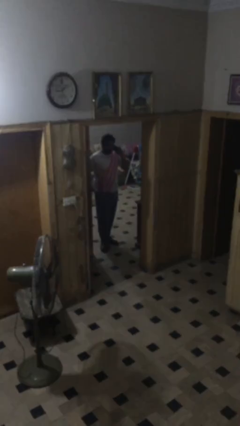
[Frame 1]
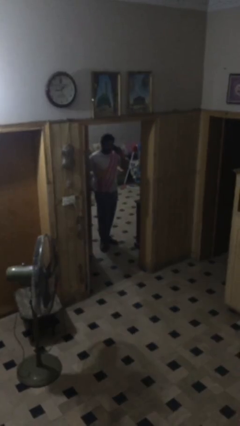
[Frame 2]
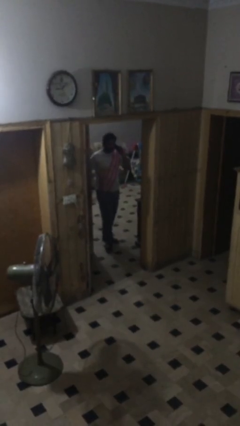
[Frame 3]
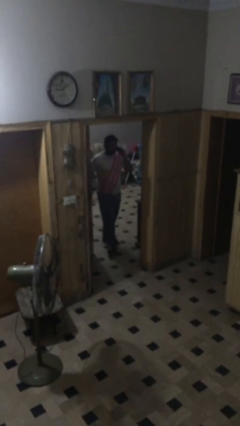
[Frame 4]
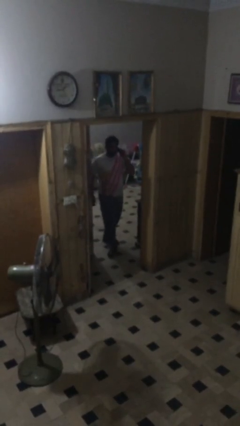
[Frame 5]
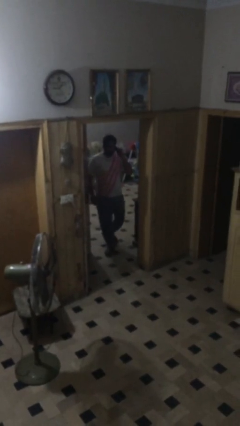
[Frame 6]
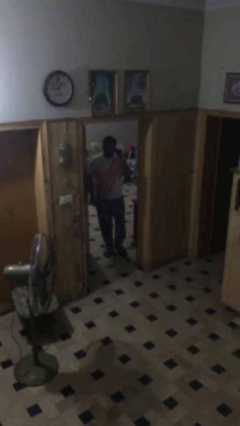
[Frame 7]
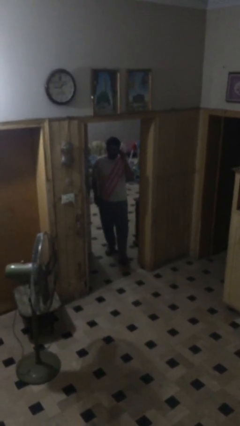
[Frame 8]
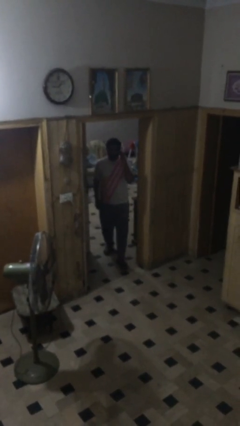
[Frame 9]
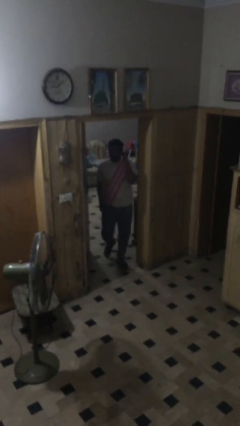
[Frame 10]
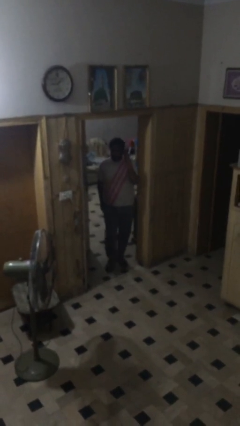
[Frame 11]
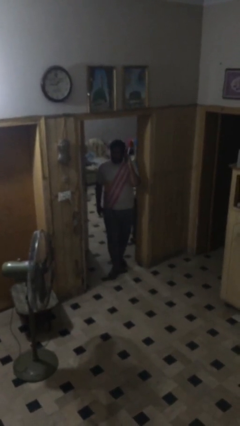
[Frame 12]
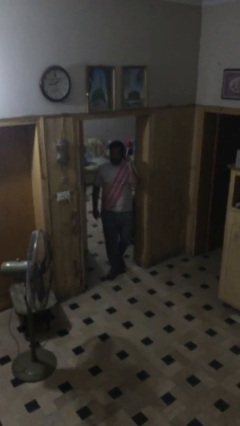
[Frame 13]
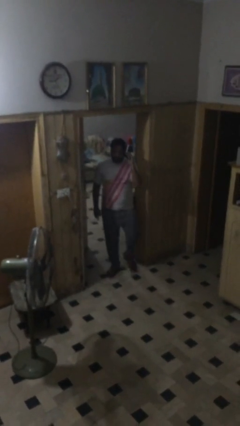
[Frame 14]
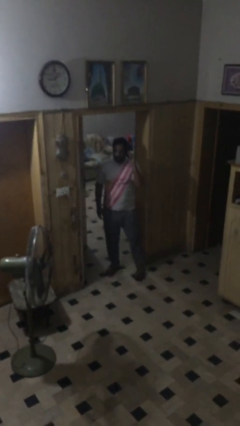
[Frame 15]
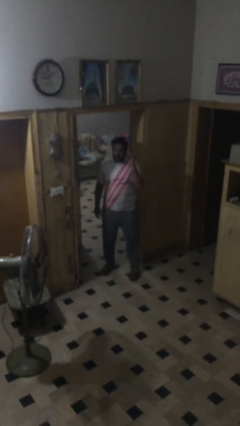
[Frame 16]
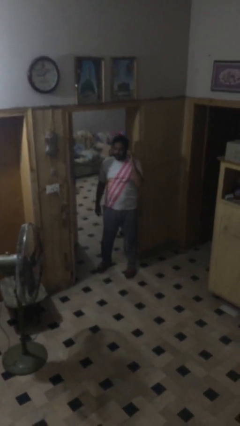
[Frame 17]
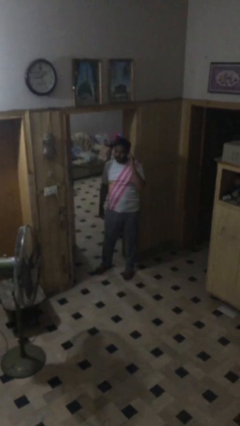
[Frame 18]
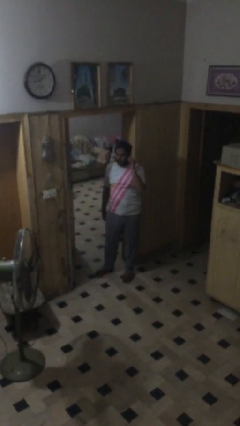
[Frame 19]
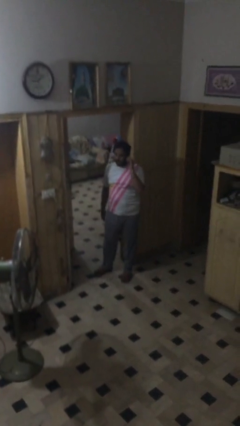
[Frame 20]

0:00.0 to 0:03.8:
person enters scene through structure

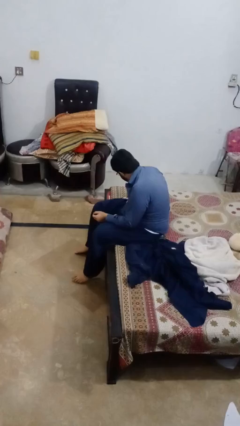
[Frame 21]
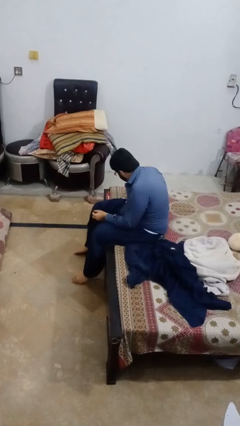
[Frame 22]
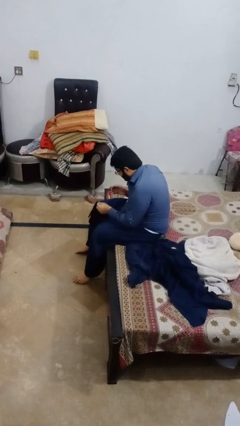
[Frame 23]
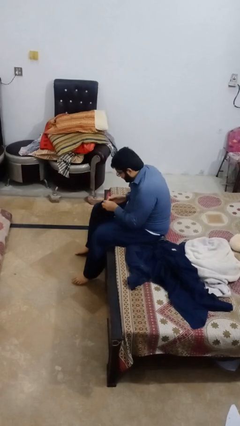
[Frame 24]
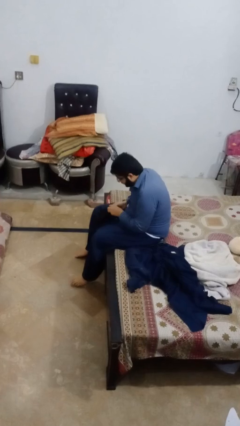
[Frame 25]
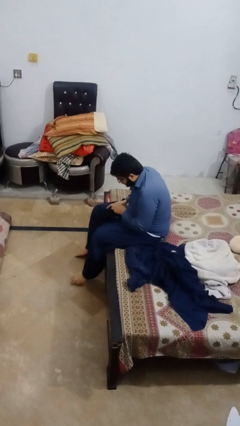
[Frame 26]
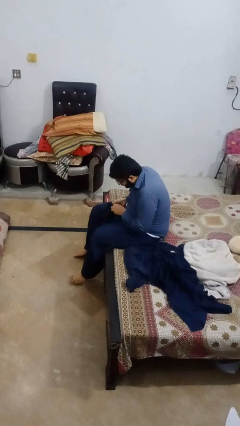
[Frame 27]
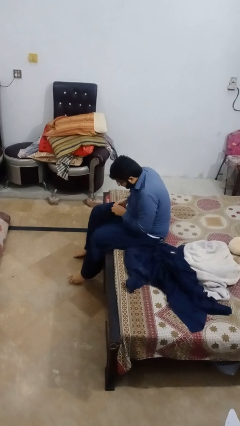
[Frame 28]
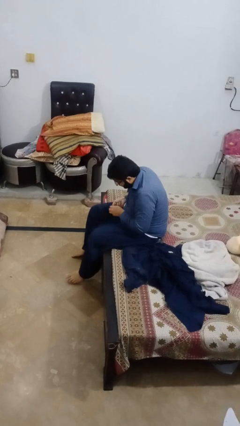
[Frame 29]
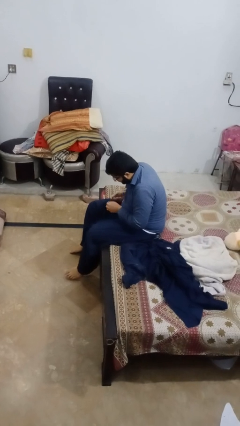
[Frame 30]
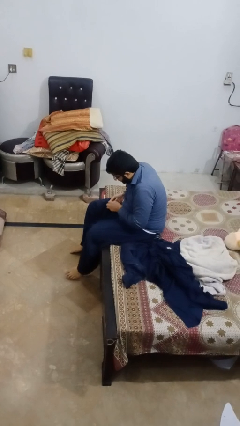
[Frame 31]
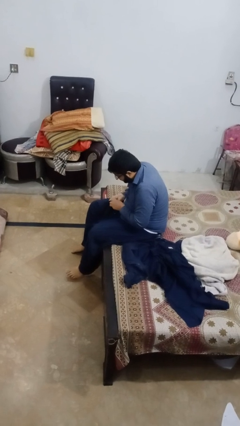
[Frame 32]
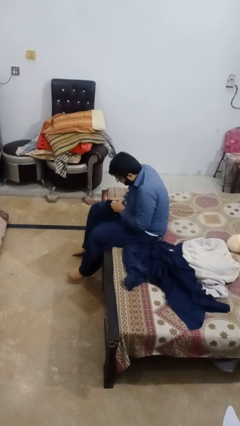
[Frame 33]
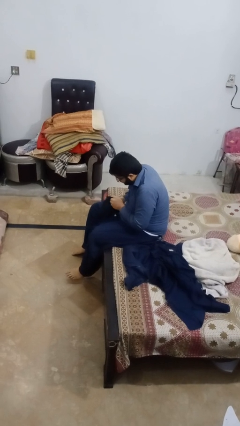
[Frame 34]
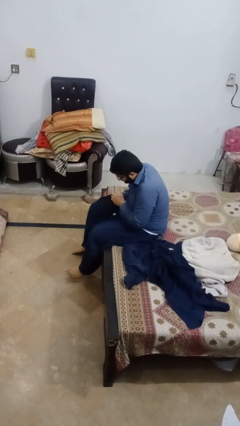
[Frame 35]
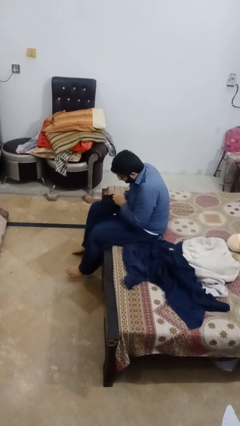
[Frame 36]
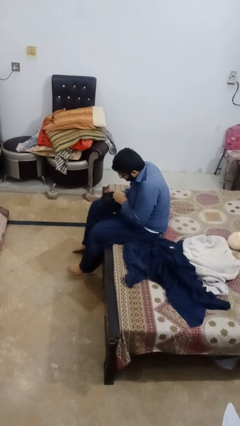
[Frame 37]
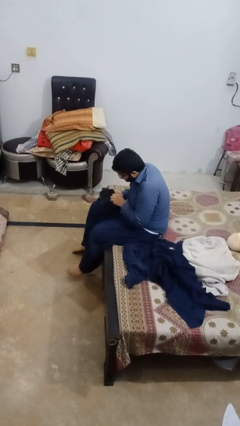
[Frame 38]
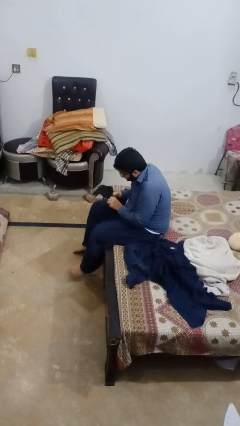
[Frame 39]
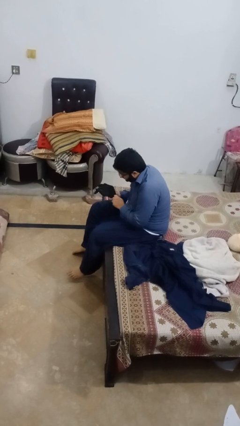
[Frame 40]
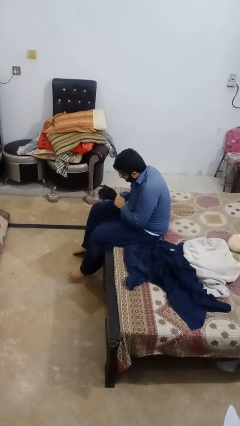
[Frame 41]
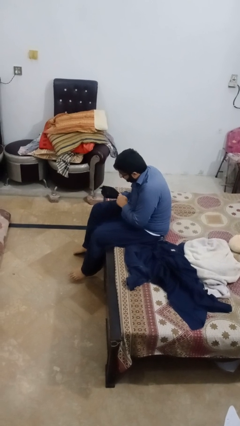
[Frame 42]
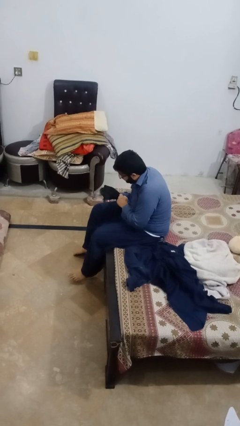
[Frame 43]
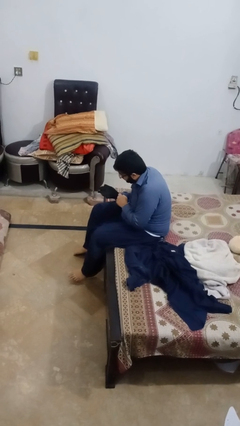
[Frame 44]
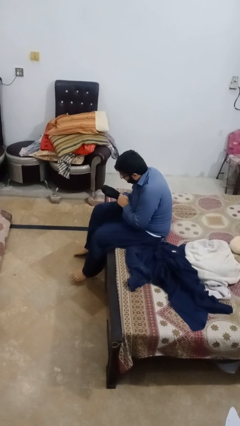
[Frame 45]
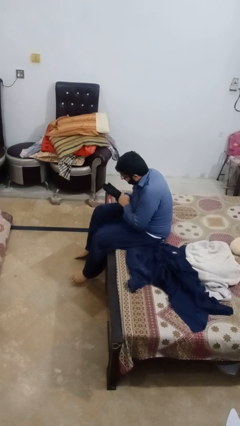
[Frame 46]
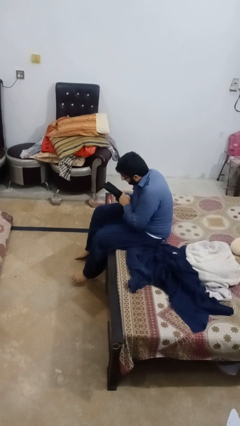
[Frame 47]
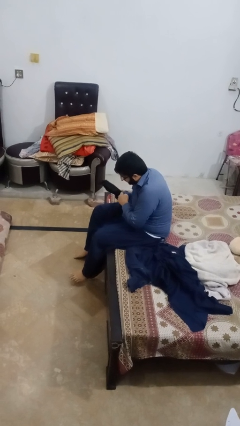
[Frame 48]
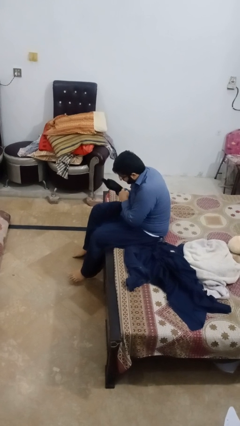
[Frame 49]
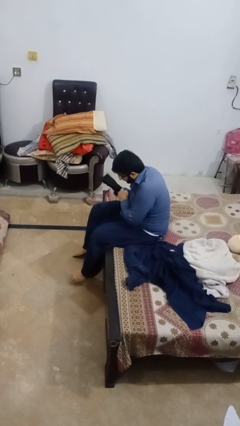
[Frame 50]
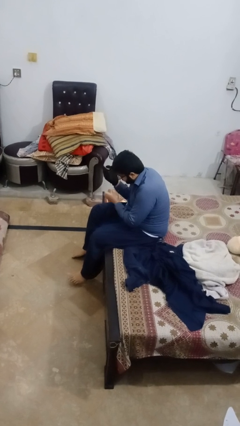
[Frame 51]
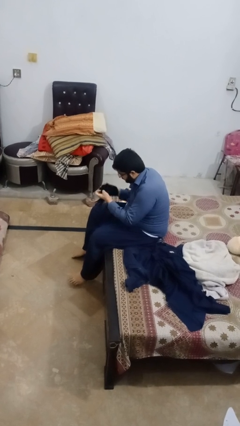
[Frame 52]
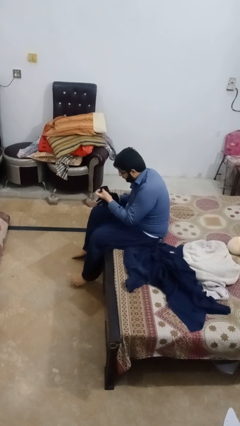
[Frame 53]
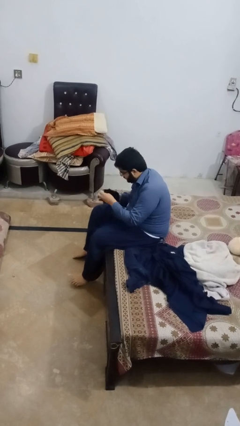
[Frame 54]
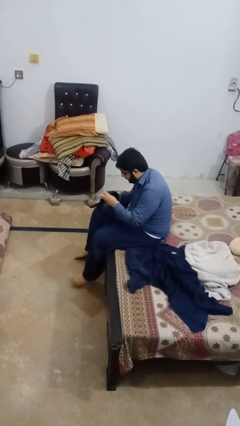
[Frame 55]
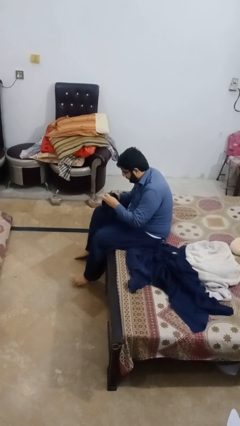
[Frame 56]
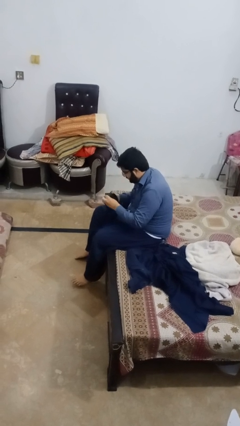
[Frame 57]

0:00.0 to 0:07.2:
person puts on gloves

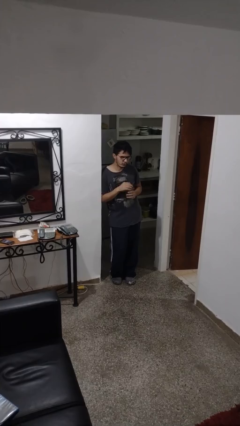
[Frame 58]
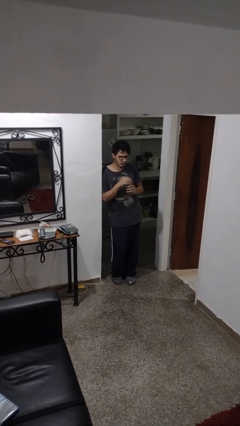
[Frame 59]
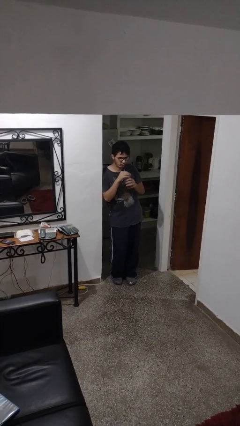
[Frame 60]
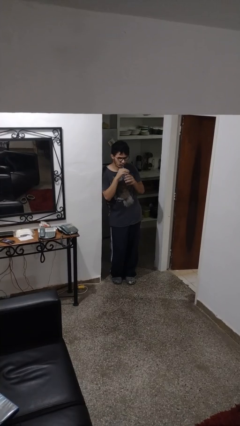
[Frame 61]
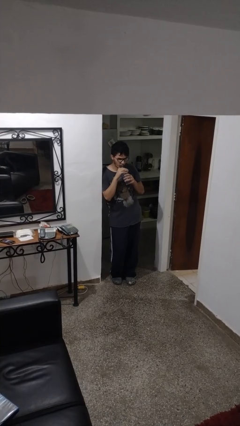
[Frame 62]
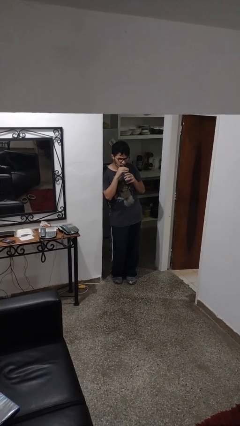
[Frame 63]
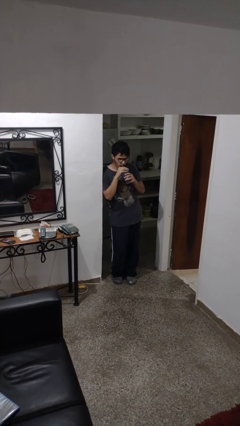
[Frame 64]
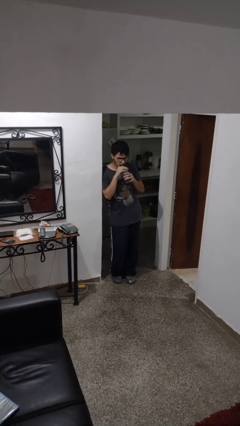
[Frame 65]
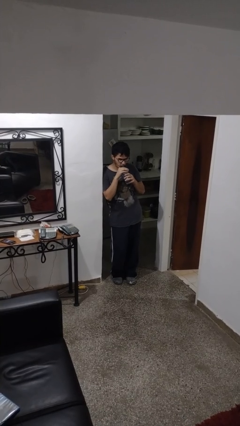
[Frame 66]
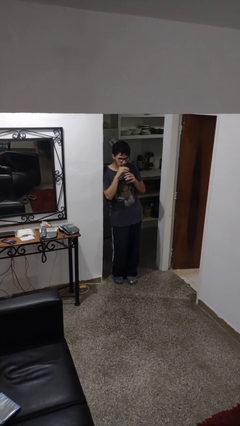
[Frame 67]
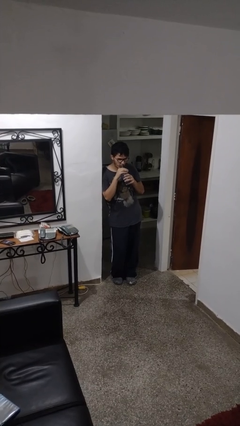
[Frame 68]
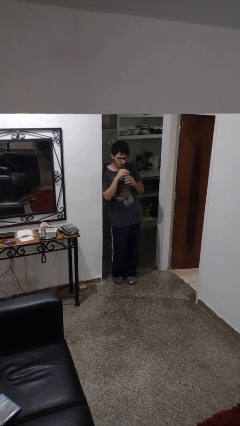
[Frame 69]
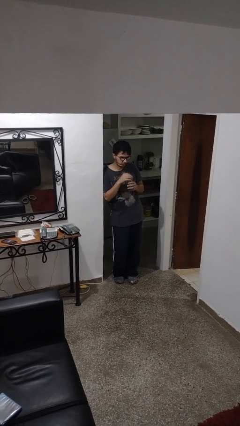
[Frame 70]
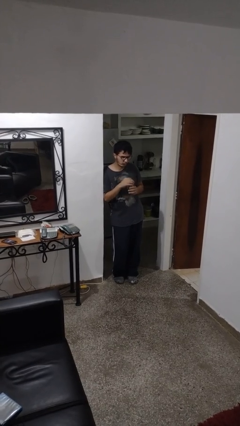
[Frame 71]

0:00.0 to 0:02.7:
person drinks from straw

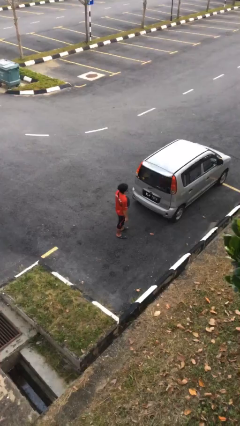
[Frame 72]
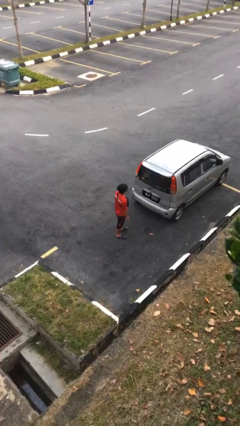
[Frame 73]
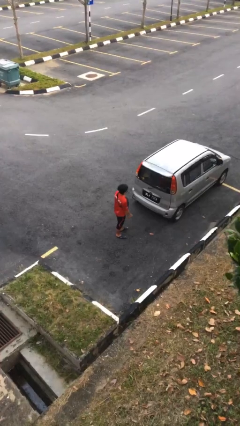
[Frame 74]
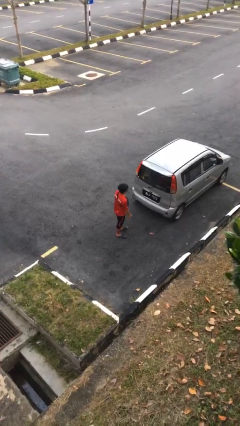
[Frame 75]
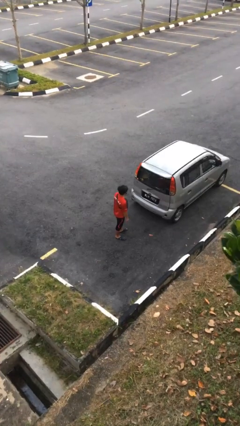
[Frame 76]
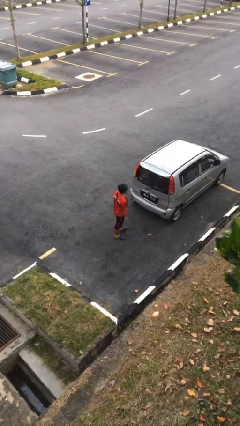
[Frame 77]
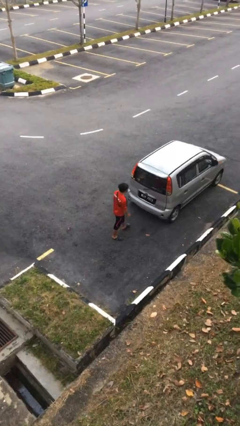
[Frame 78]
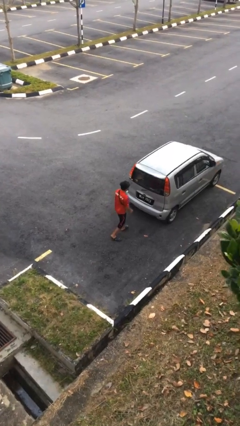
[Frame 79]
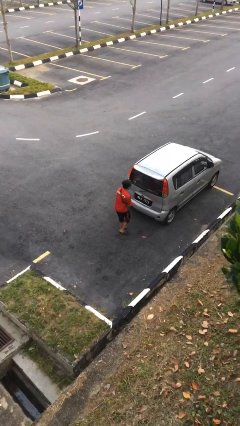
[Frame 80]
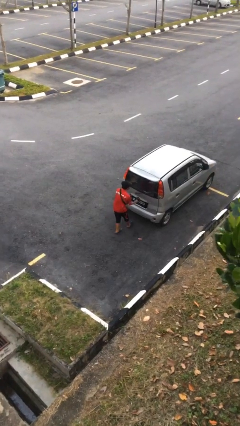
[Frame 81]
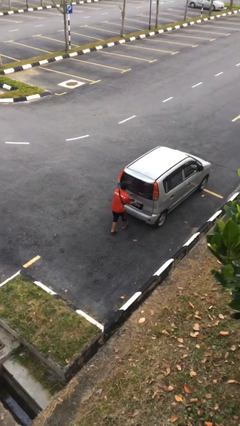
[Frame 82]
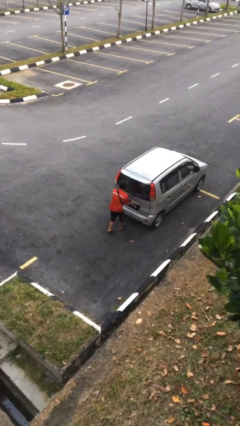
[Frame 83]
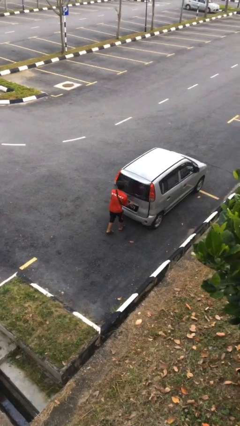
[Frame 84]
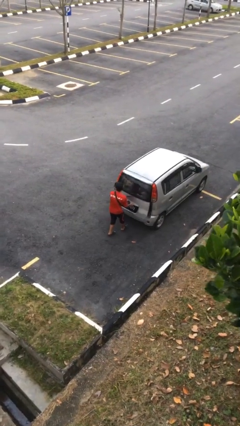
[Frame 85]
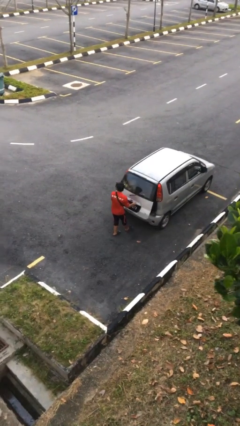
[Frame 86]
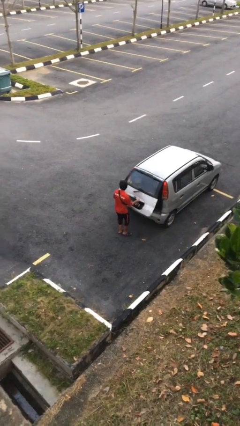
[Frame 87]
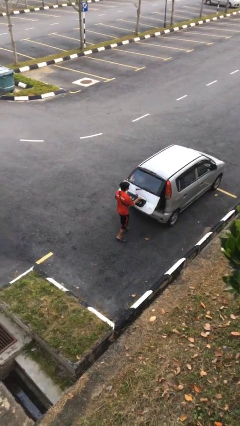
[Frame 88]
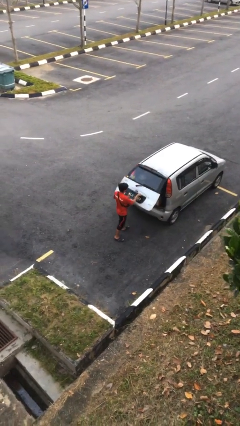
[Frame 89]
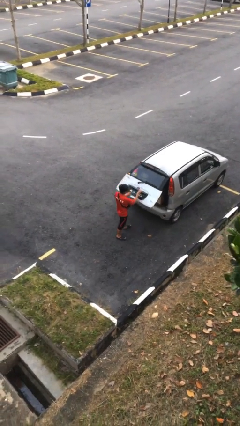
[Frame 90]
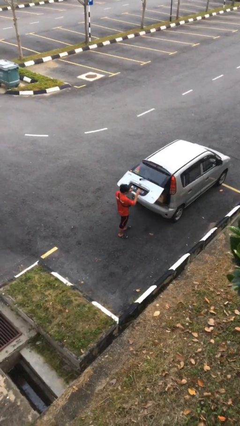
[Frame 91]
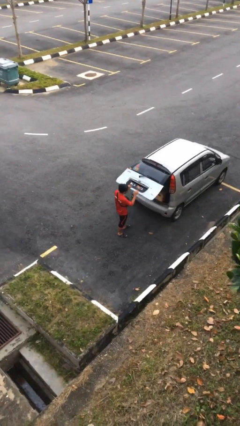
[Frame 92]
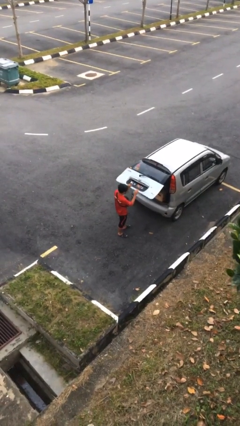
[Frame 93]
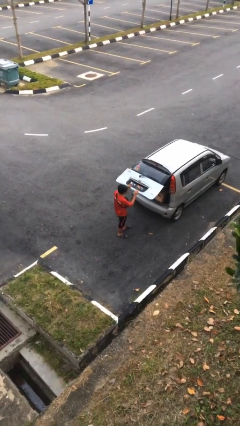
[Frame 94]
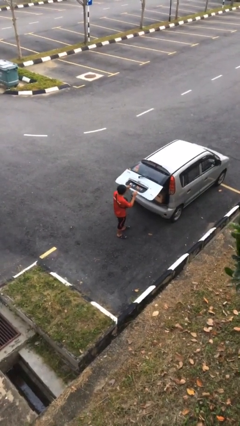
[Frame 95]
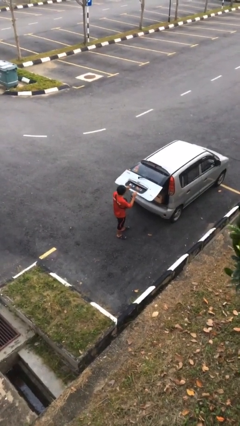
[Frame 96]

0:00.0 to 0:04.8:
person opens car trunk
